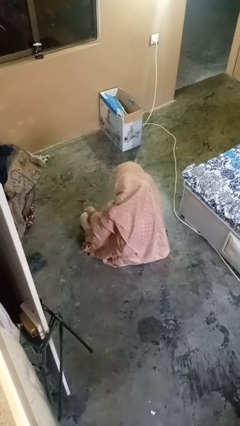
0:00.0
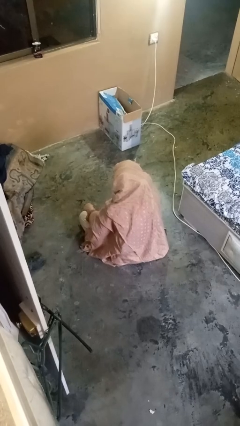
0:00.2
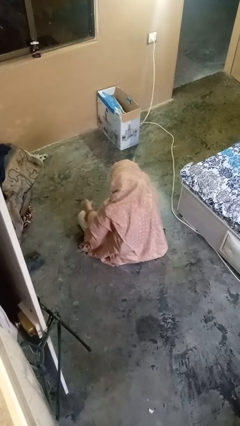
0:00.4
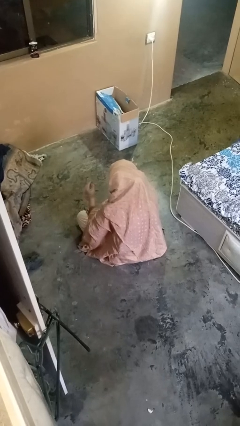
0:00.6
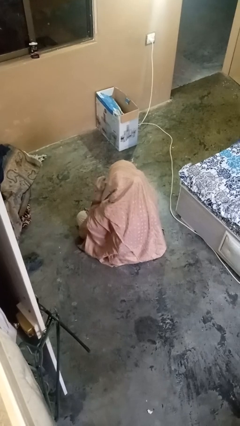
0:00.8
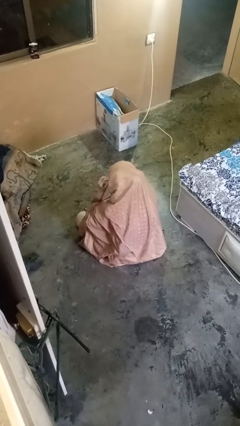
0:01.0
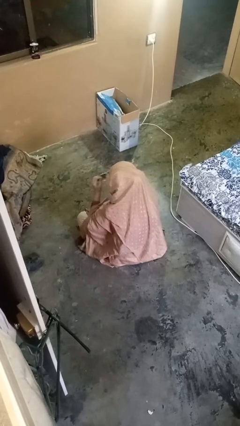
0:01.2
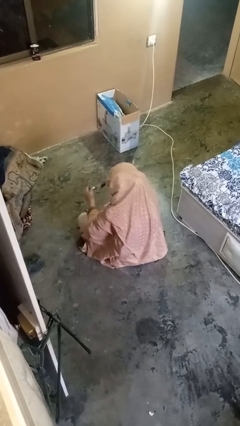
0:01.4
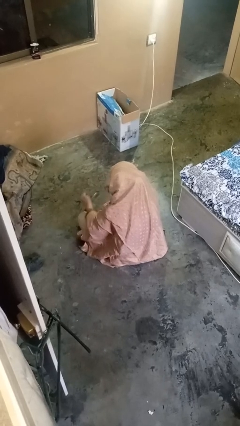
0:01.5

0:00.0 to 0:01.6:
person takes off glasses

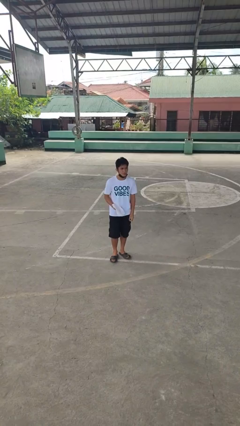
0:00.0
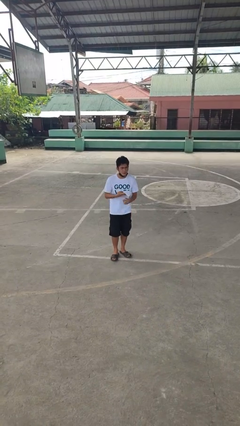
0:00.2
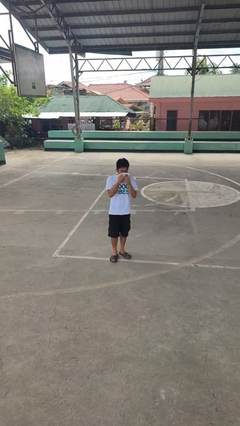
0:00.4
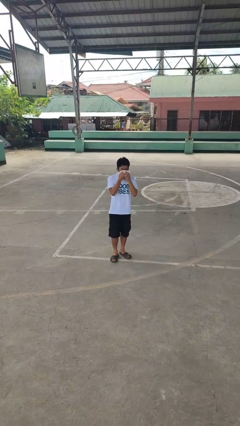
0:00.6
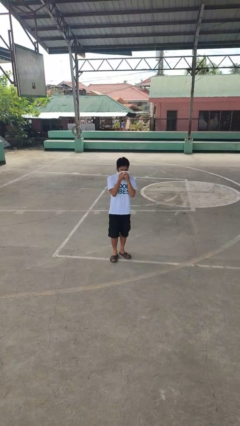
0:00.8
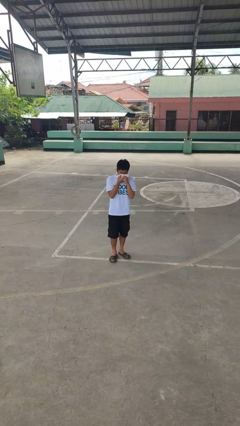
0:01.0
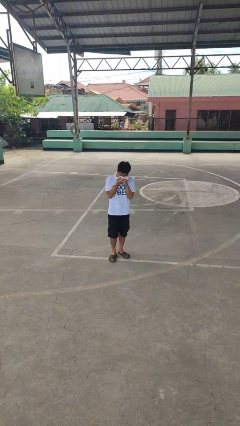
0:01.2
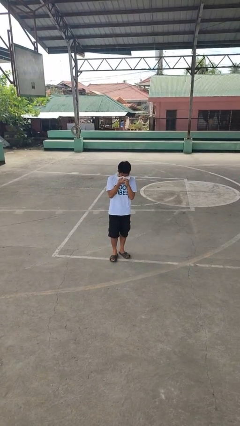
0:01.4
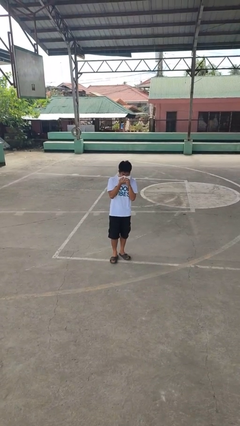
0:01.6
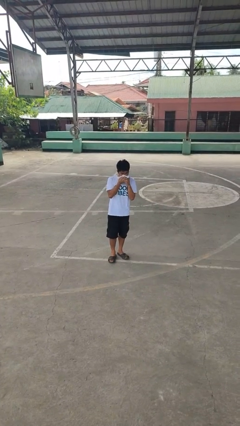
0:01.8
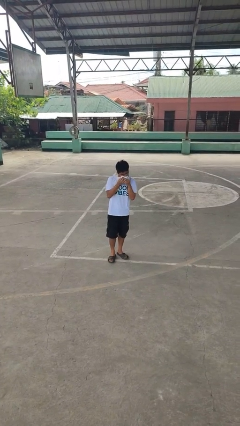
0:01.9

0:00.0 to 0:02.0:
person blows nose

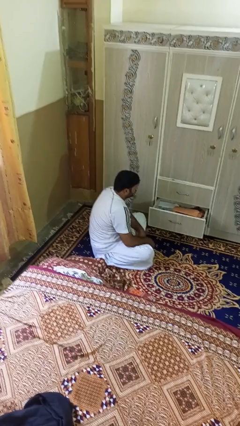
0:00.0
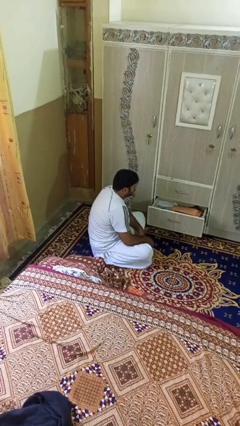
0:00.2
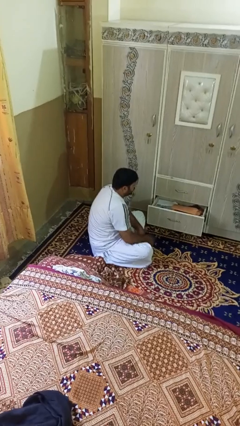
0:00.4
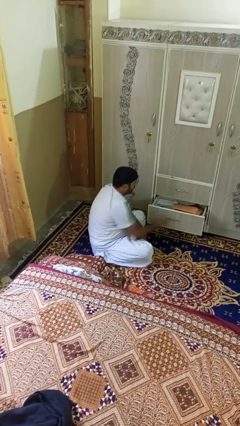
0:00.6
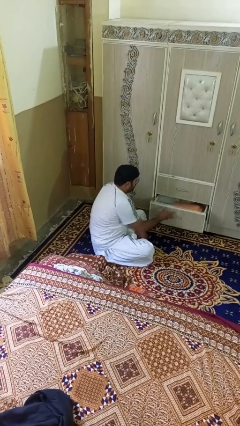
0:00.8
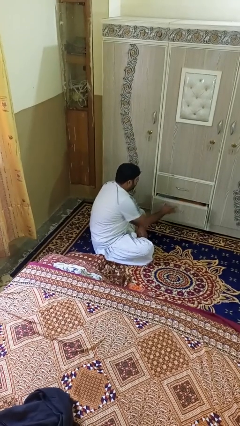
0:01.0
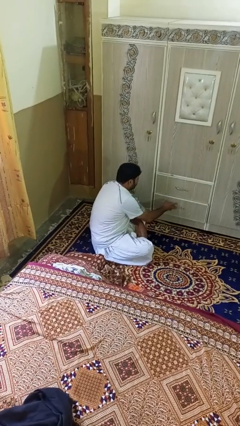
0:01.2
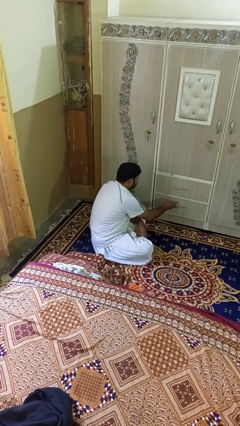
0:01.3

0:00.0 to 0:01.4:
person closes dresser drawer

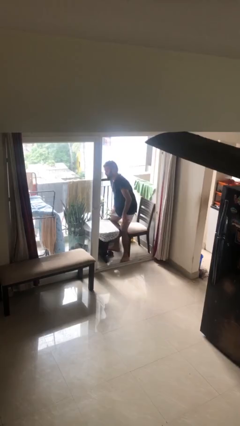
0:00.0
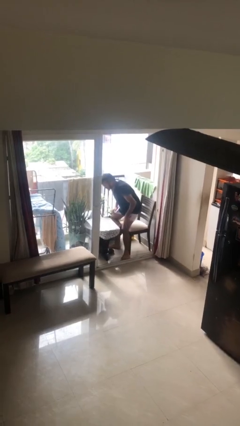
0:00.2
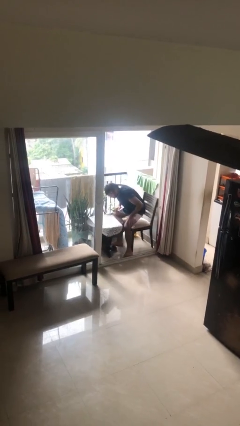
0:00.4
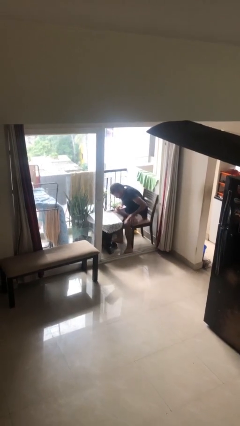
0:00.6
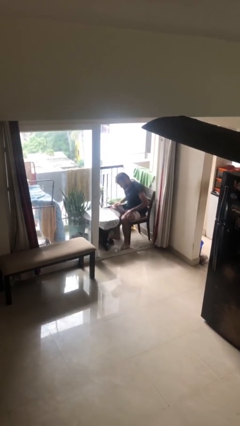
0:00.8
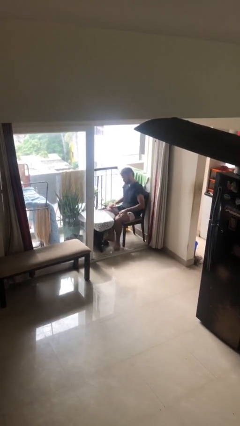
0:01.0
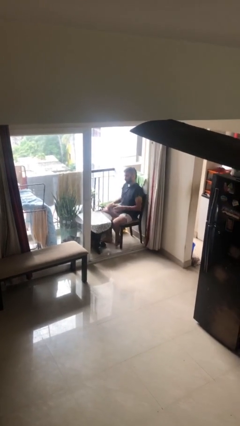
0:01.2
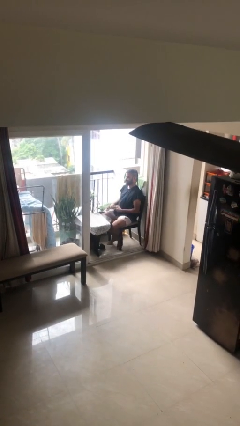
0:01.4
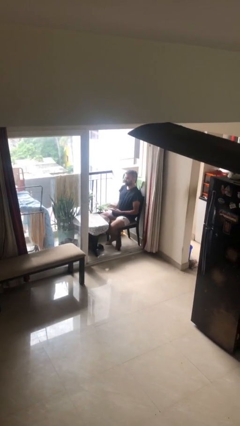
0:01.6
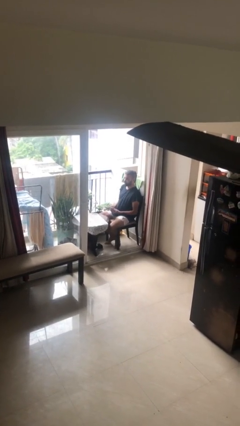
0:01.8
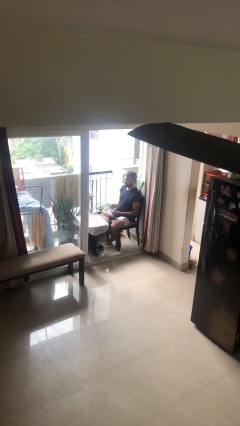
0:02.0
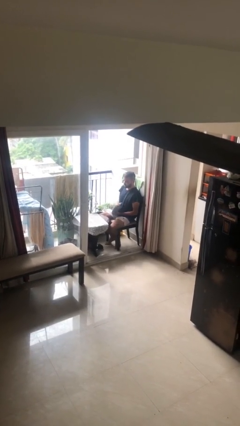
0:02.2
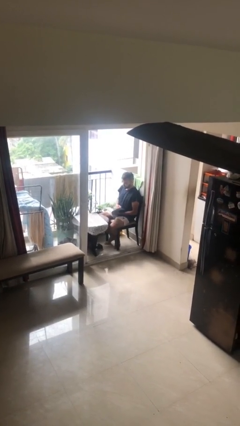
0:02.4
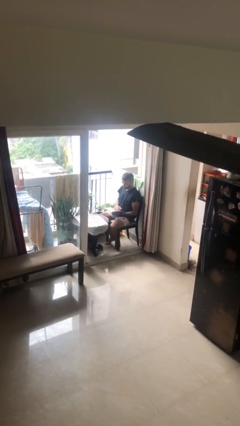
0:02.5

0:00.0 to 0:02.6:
person sits down

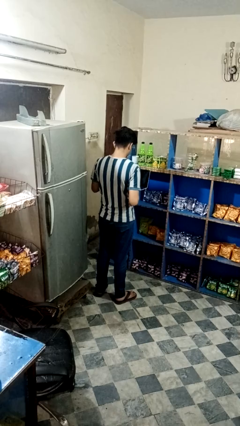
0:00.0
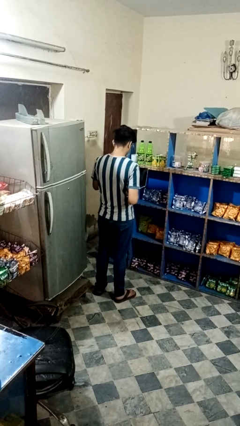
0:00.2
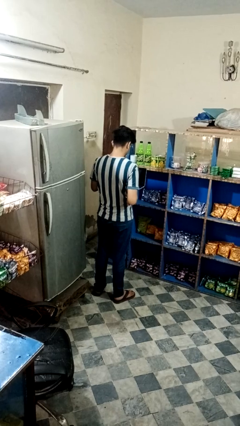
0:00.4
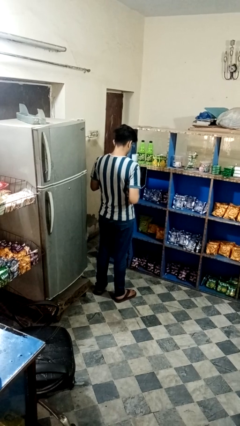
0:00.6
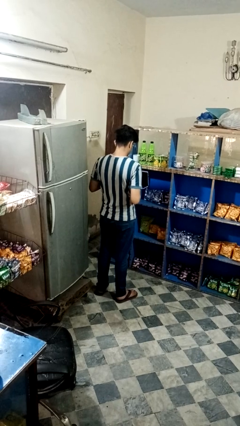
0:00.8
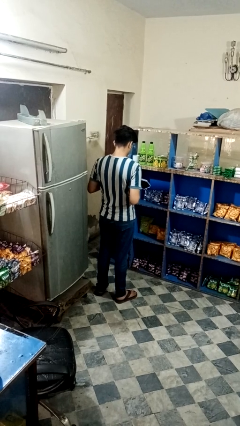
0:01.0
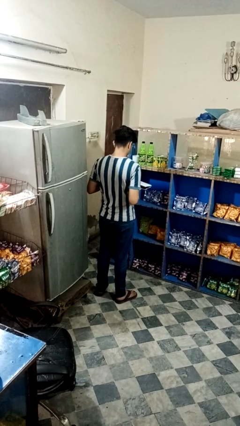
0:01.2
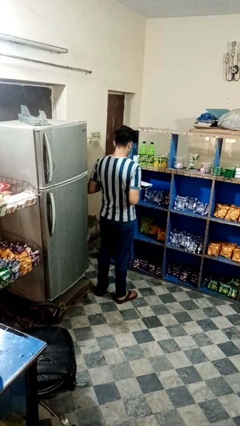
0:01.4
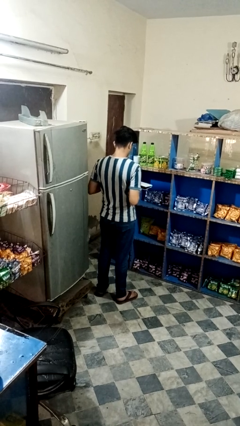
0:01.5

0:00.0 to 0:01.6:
person closes laptop

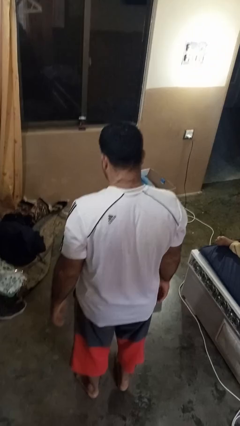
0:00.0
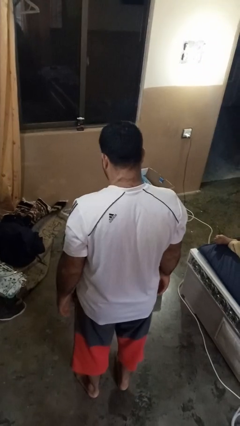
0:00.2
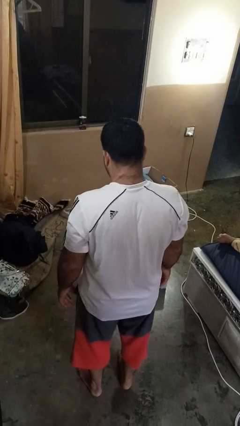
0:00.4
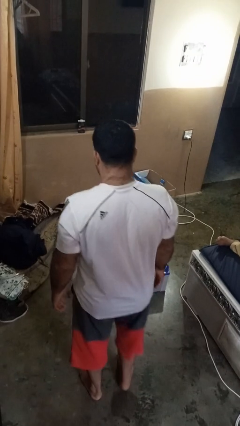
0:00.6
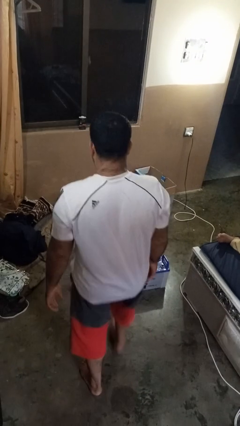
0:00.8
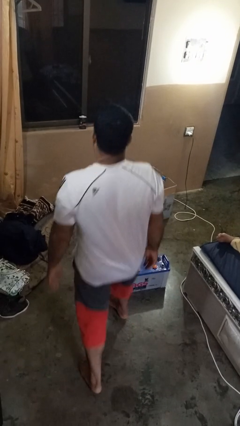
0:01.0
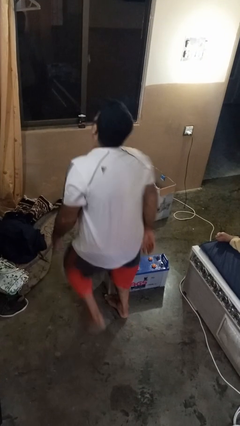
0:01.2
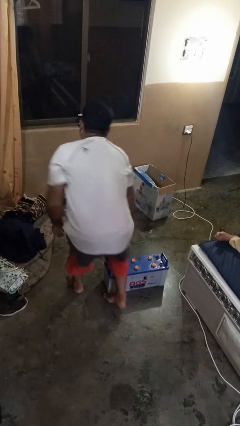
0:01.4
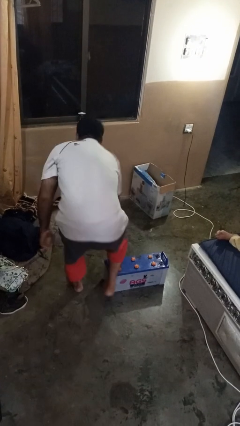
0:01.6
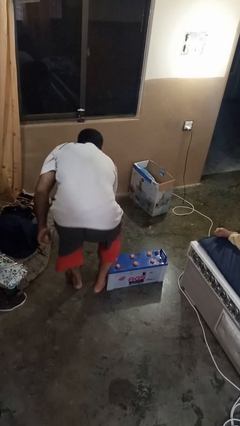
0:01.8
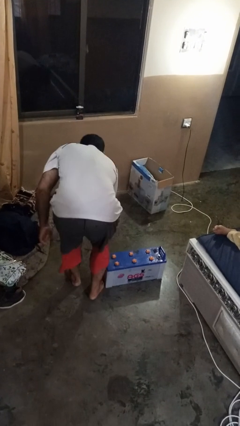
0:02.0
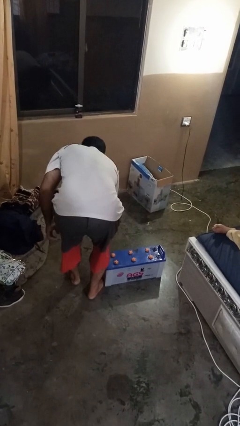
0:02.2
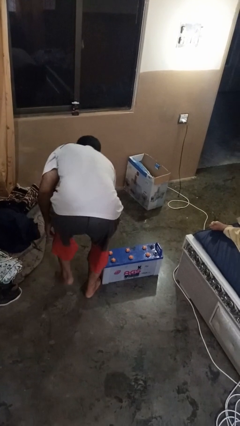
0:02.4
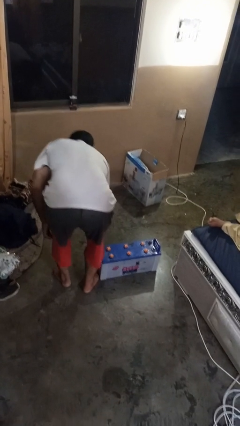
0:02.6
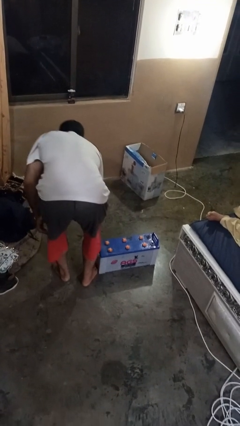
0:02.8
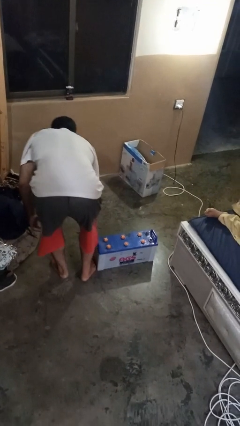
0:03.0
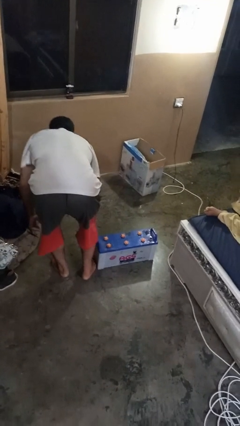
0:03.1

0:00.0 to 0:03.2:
person trips on object on floor

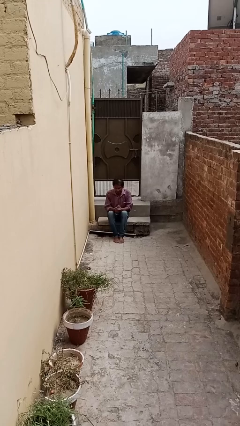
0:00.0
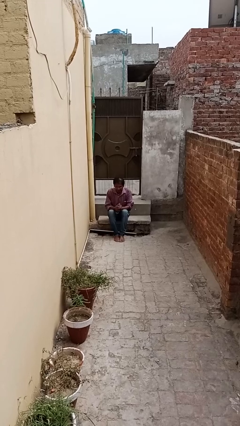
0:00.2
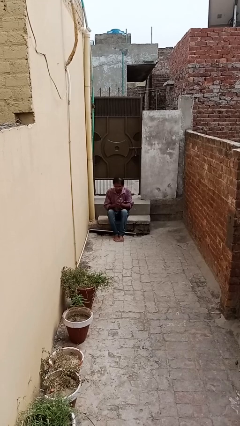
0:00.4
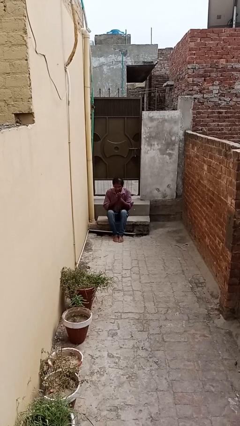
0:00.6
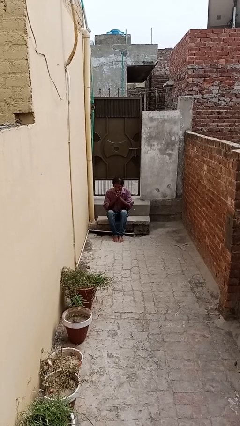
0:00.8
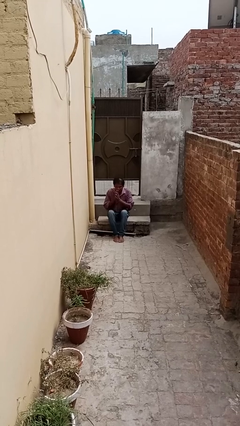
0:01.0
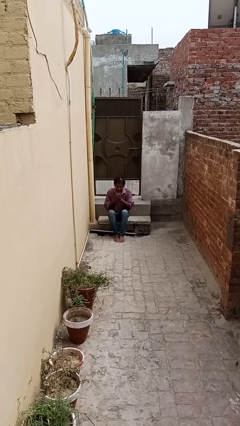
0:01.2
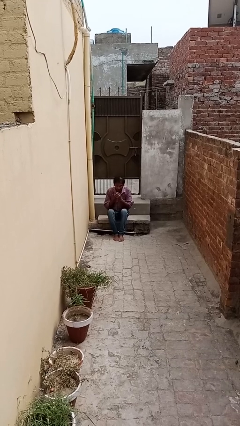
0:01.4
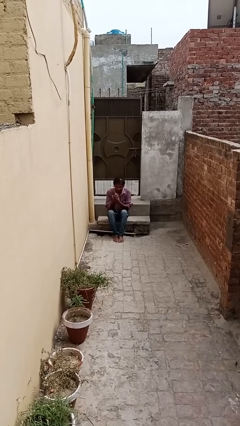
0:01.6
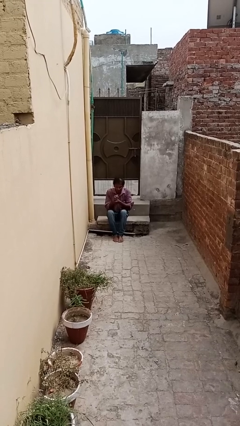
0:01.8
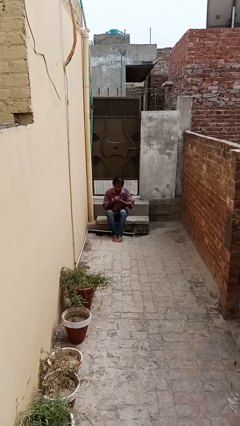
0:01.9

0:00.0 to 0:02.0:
person blows into hands

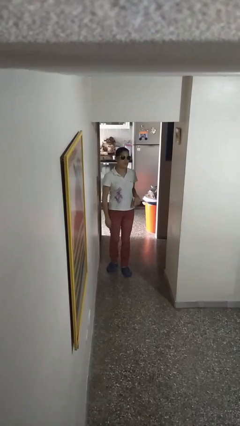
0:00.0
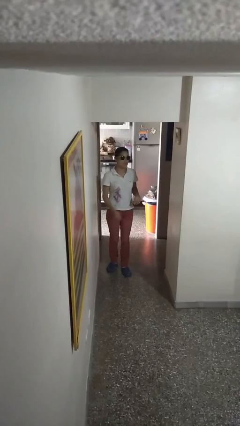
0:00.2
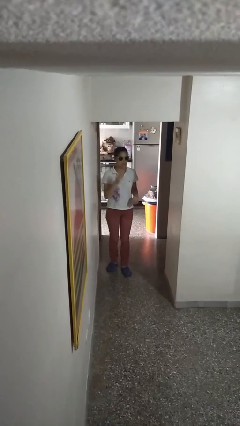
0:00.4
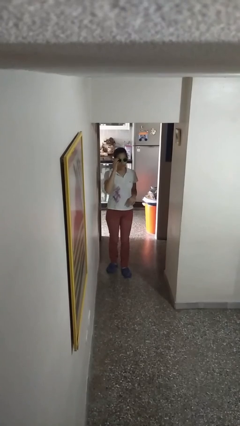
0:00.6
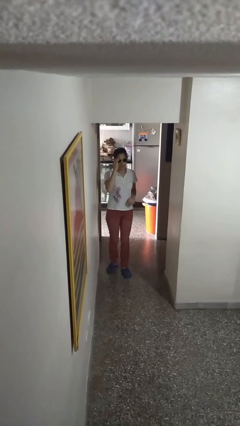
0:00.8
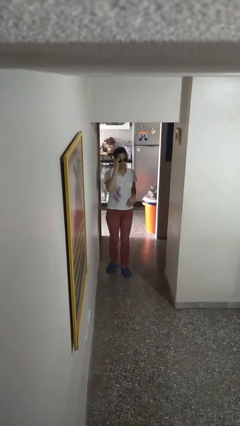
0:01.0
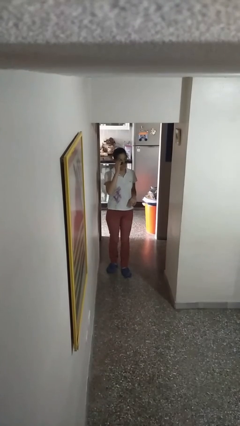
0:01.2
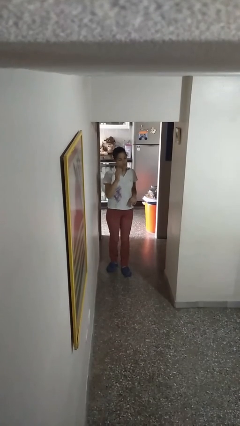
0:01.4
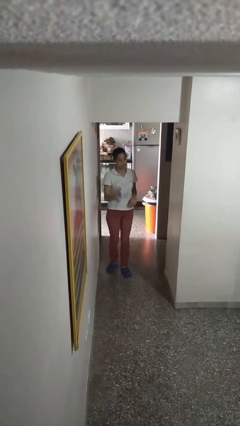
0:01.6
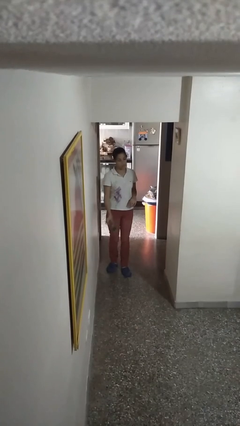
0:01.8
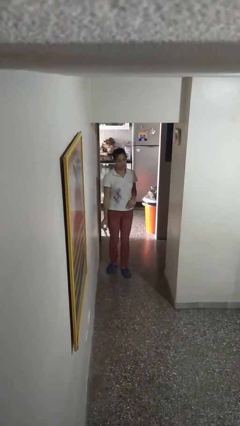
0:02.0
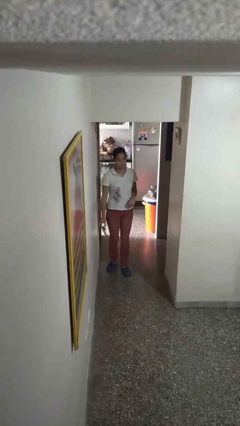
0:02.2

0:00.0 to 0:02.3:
person takes off sunglasses
